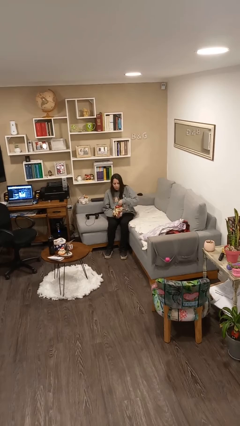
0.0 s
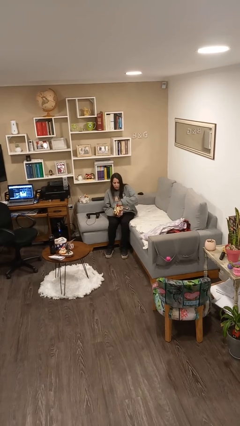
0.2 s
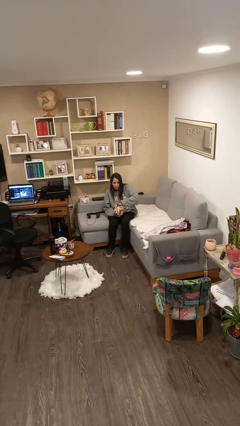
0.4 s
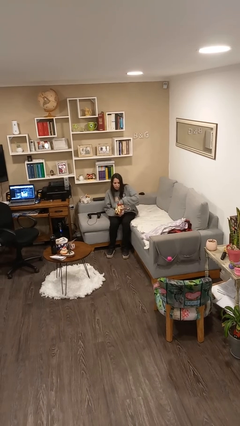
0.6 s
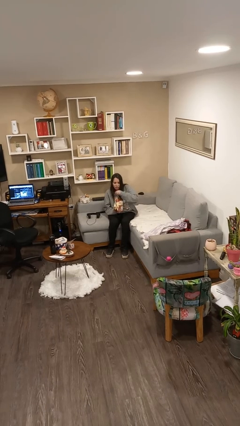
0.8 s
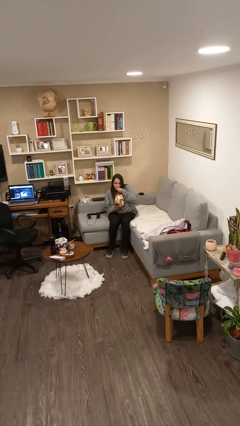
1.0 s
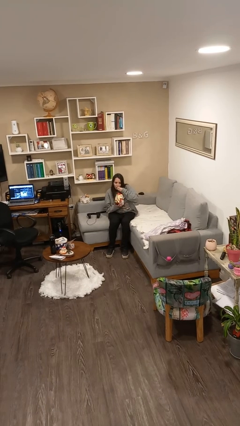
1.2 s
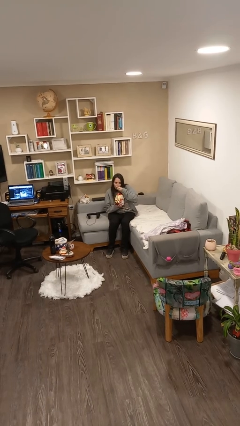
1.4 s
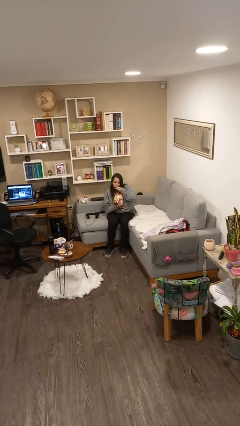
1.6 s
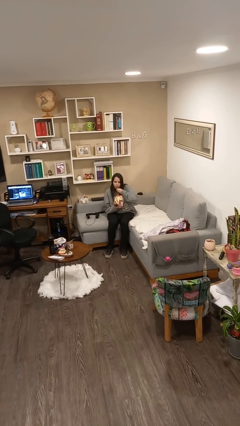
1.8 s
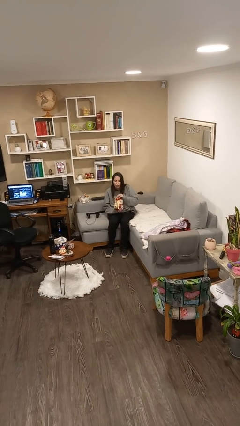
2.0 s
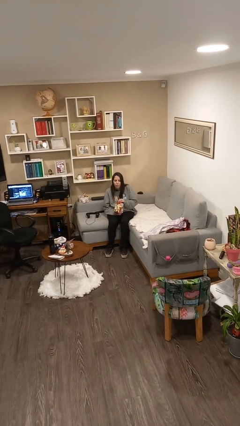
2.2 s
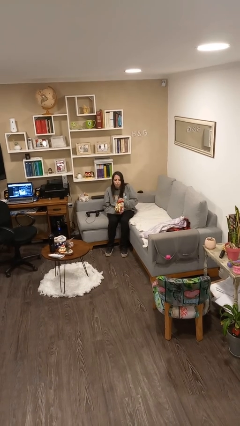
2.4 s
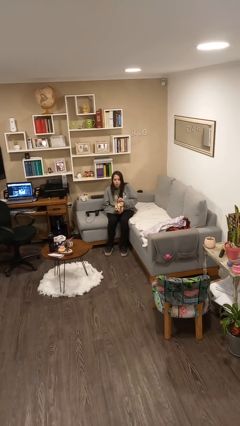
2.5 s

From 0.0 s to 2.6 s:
person eats snack from bag

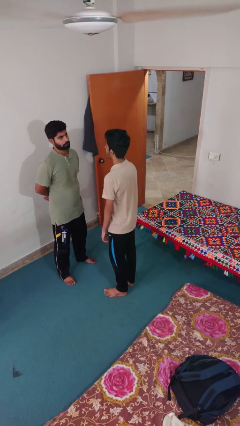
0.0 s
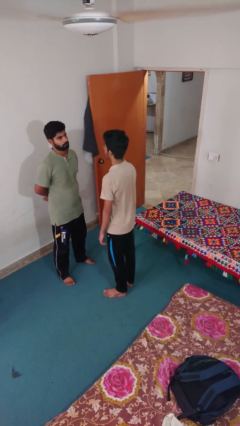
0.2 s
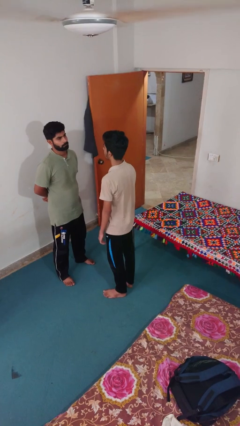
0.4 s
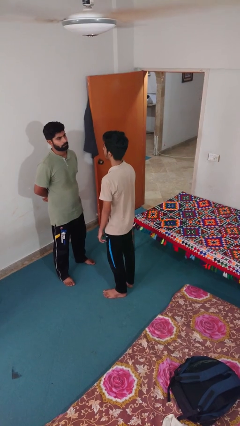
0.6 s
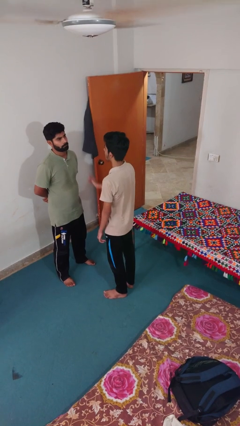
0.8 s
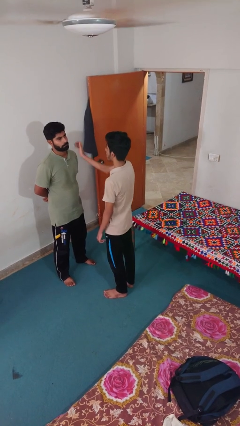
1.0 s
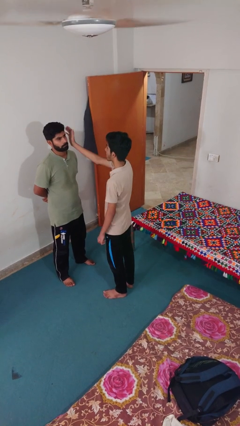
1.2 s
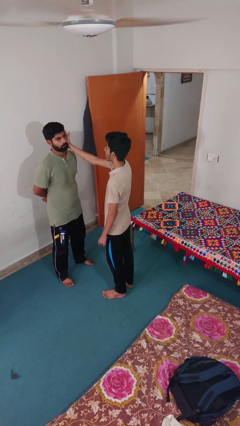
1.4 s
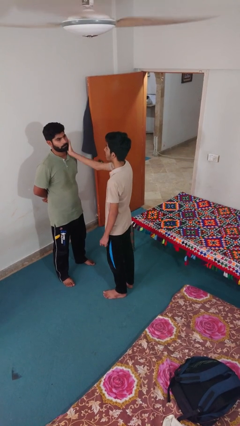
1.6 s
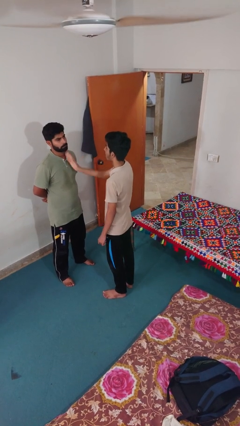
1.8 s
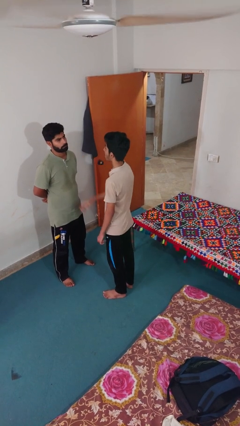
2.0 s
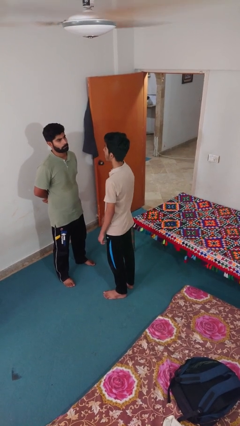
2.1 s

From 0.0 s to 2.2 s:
person touches face of person

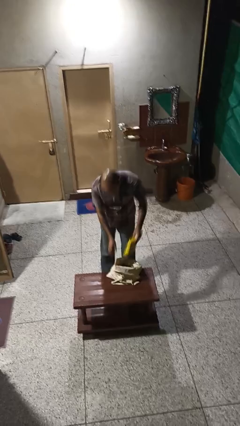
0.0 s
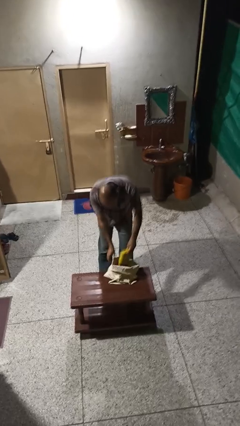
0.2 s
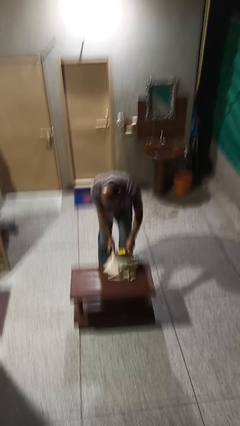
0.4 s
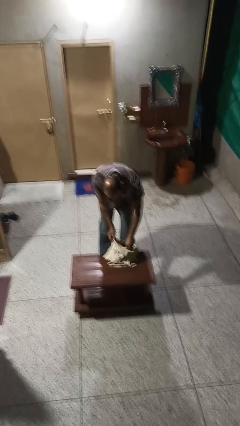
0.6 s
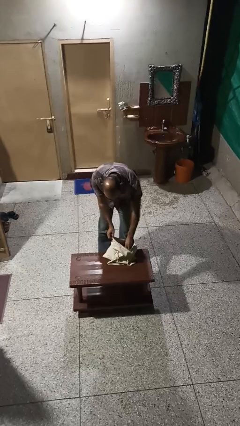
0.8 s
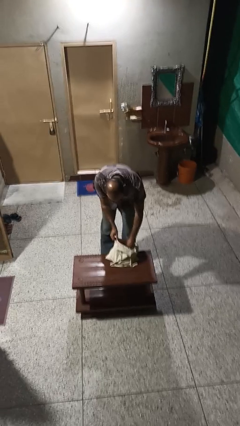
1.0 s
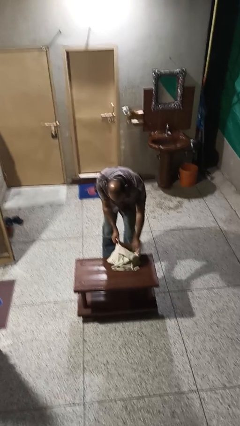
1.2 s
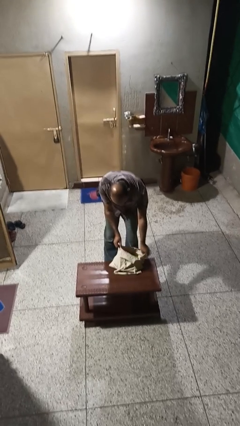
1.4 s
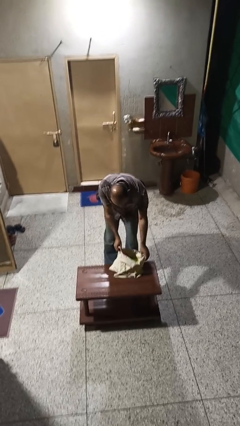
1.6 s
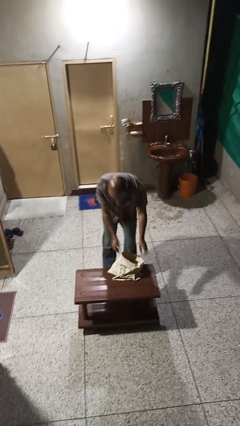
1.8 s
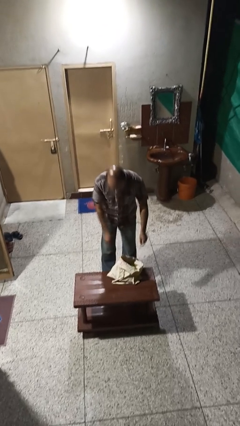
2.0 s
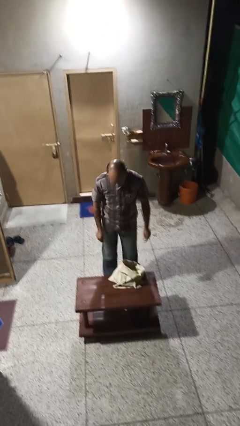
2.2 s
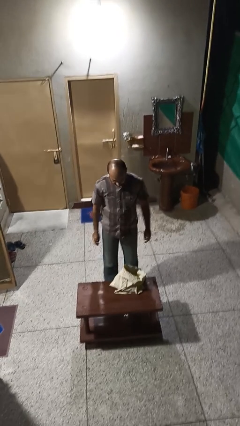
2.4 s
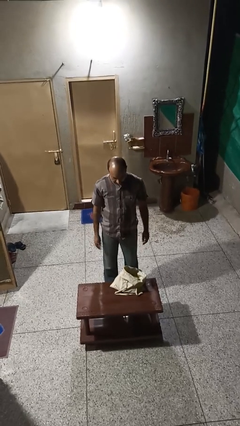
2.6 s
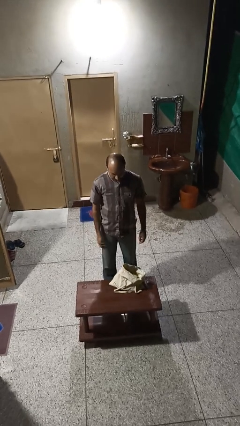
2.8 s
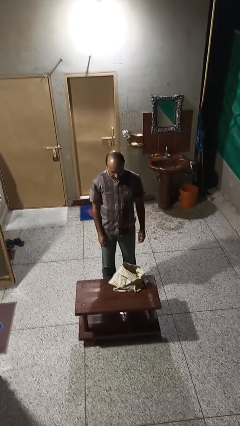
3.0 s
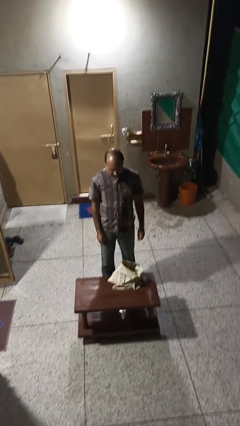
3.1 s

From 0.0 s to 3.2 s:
person puts object into bag

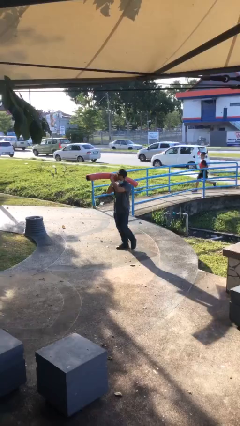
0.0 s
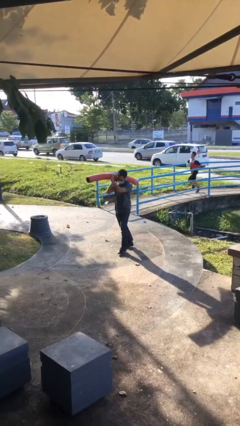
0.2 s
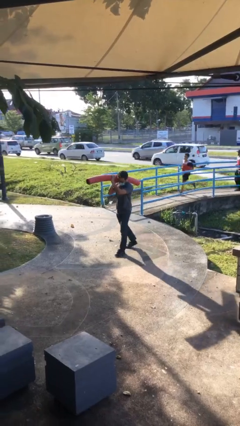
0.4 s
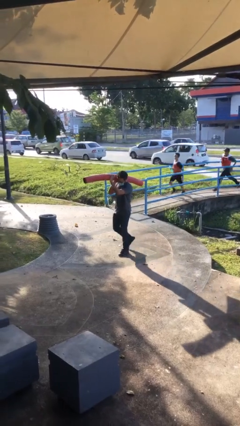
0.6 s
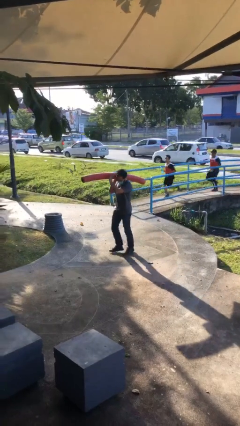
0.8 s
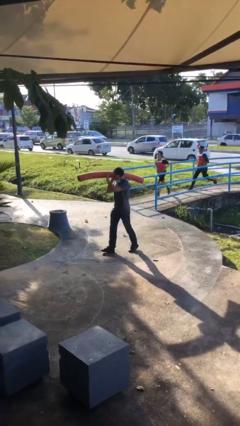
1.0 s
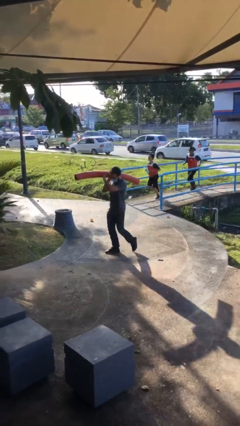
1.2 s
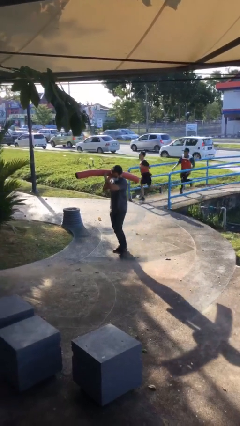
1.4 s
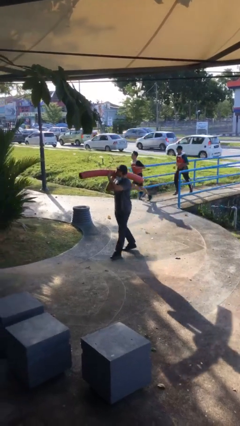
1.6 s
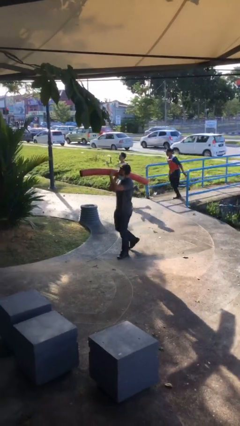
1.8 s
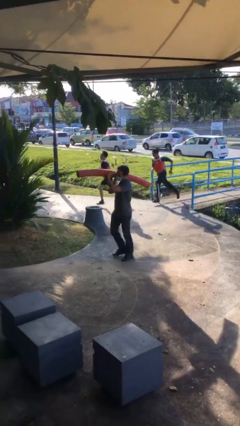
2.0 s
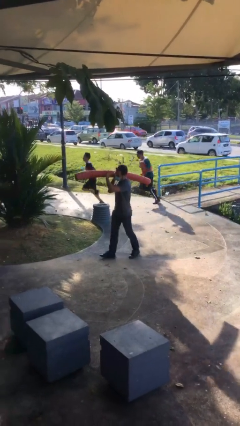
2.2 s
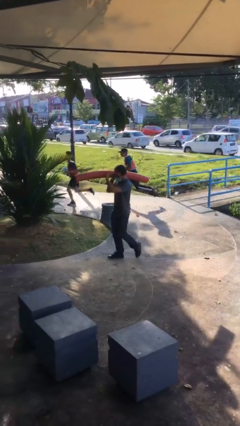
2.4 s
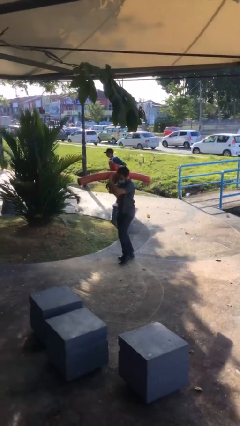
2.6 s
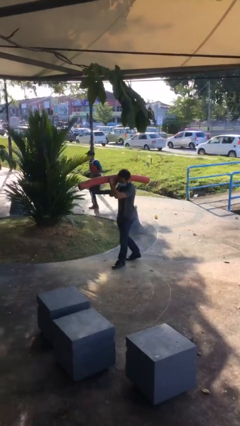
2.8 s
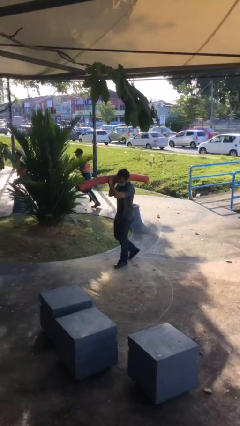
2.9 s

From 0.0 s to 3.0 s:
person carries heavy object

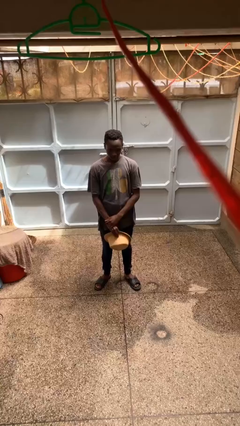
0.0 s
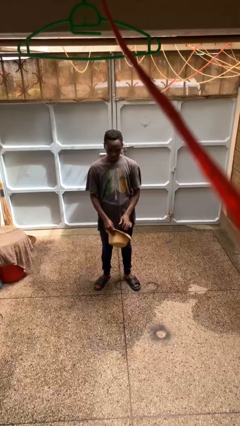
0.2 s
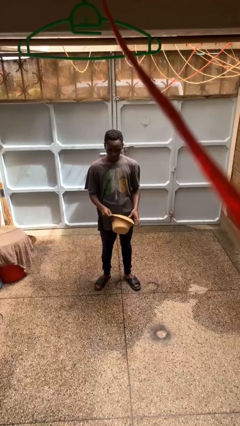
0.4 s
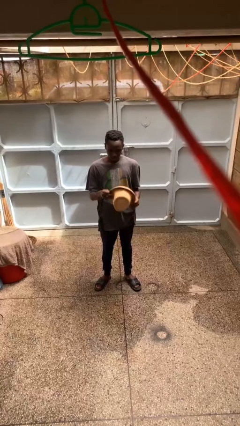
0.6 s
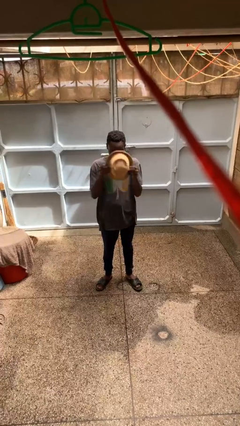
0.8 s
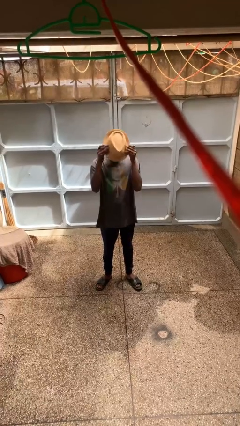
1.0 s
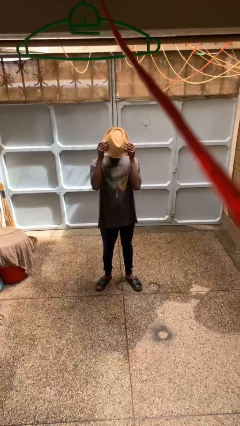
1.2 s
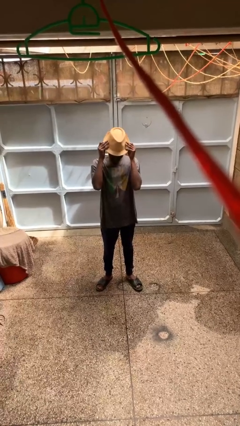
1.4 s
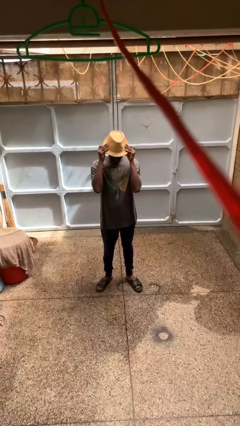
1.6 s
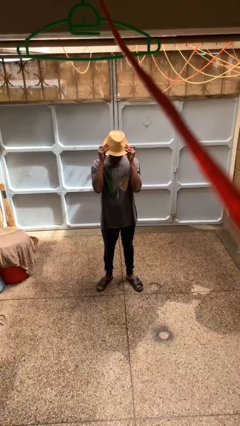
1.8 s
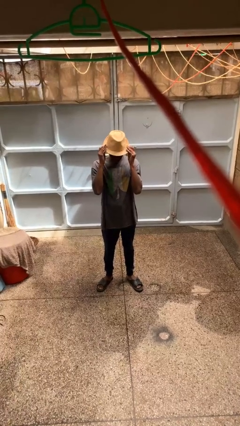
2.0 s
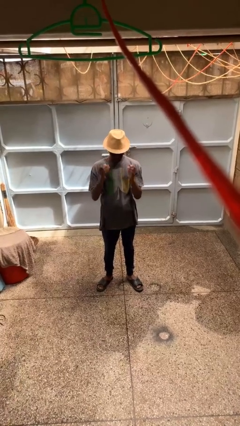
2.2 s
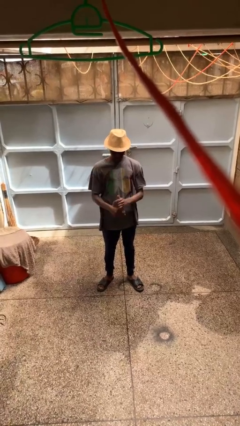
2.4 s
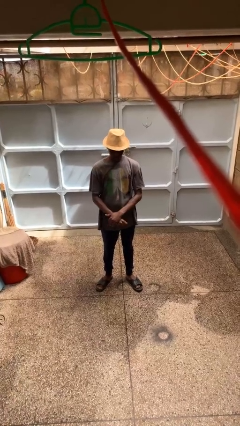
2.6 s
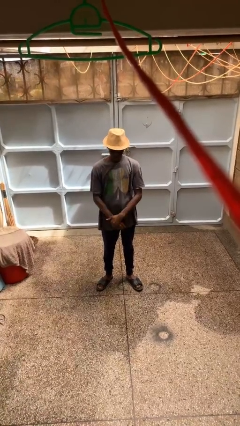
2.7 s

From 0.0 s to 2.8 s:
person puts on hat

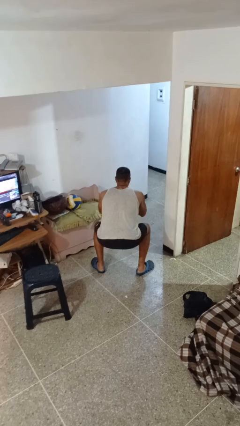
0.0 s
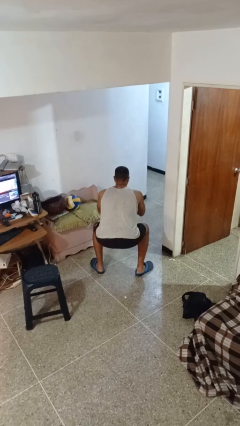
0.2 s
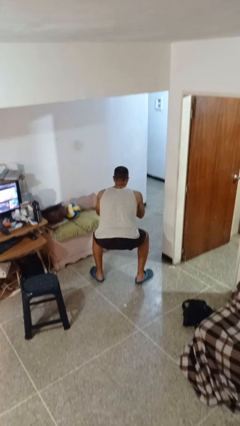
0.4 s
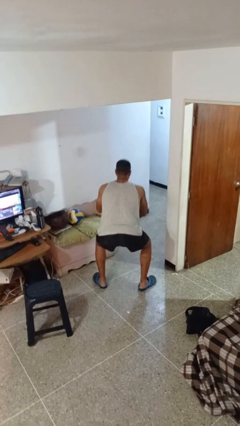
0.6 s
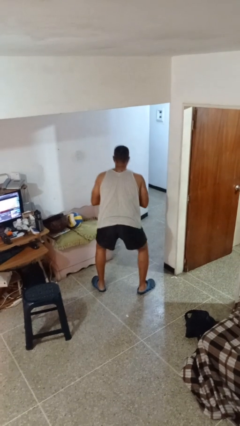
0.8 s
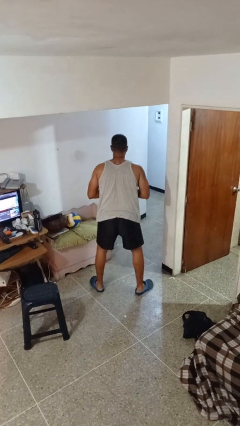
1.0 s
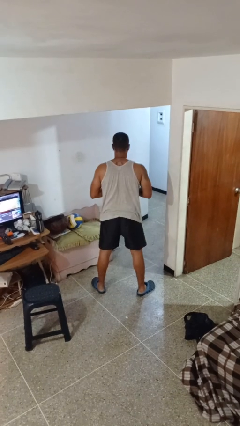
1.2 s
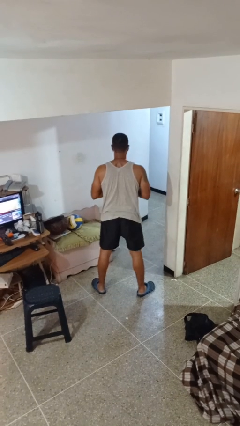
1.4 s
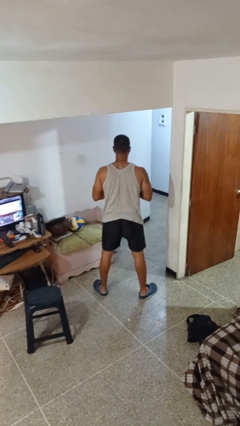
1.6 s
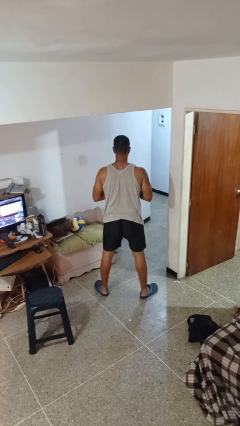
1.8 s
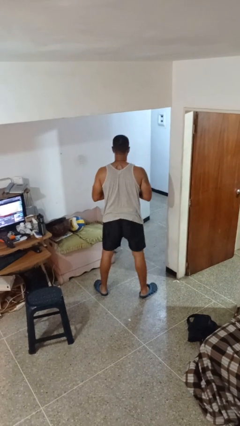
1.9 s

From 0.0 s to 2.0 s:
person stands up

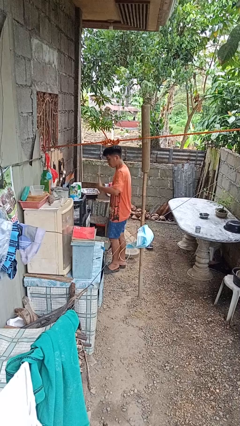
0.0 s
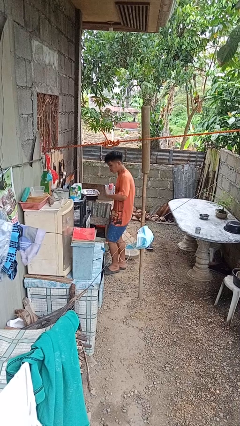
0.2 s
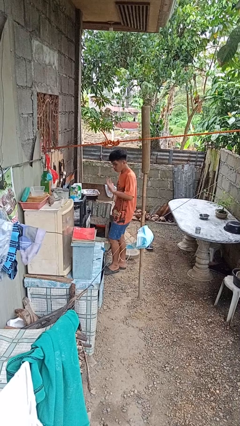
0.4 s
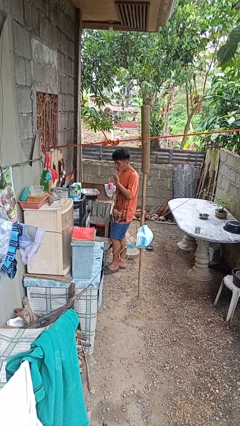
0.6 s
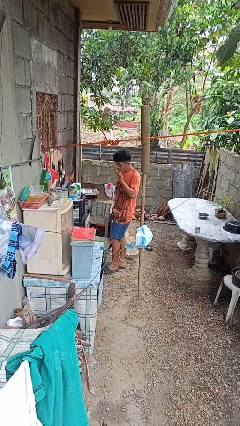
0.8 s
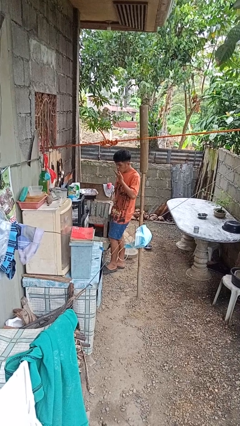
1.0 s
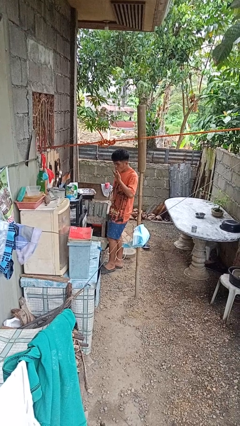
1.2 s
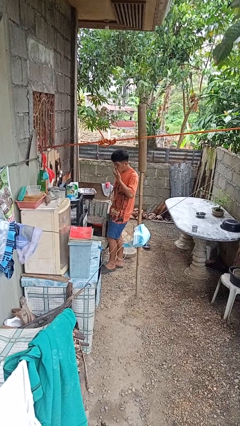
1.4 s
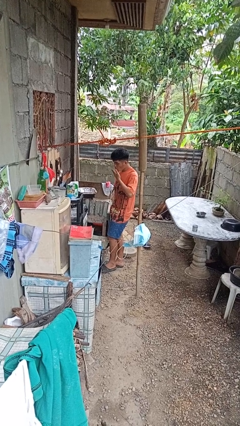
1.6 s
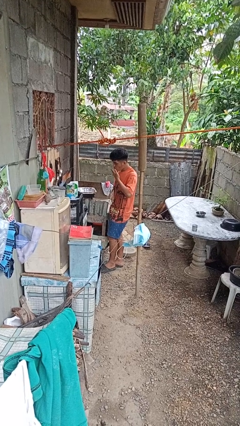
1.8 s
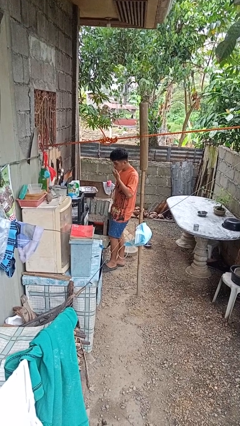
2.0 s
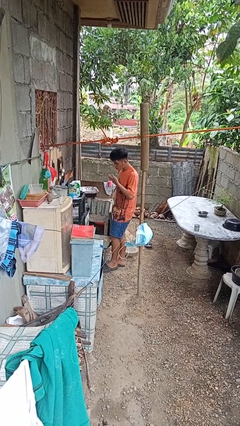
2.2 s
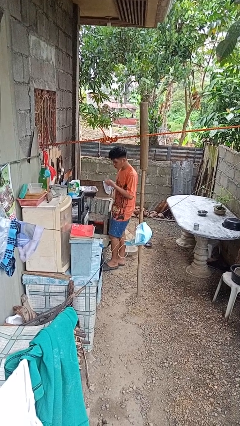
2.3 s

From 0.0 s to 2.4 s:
person burns hand
